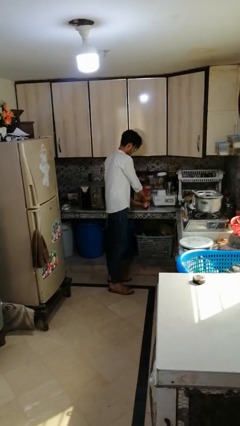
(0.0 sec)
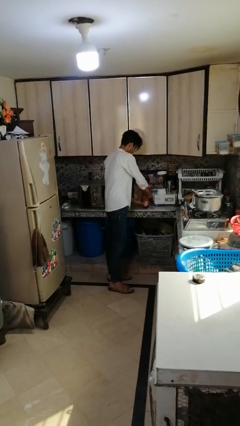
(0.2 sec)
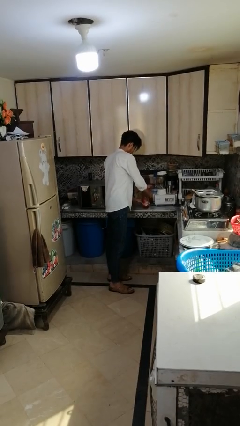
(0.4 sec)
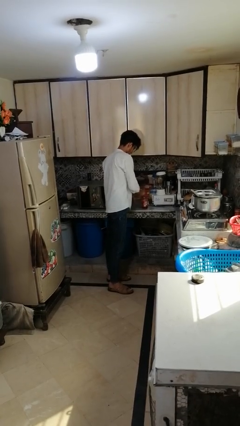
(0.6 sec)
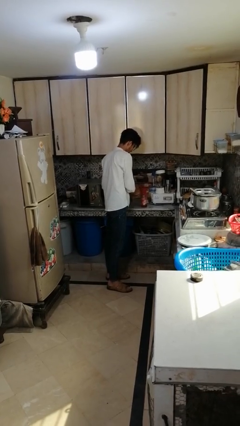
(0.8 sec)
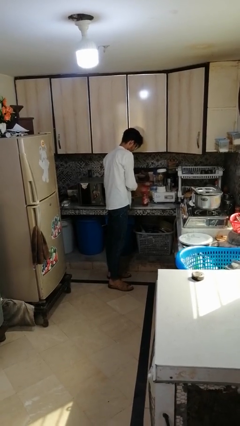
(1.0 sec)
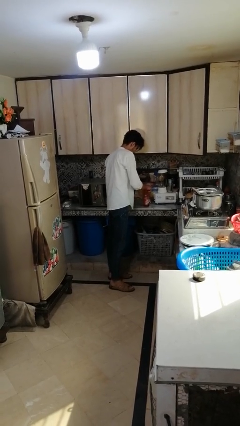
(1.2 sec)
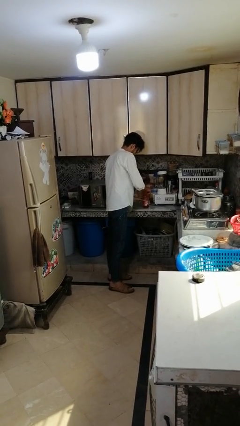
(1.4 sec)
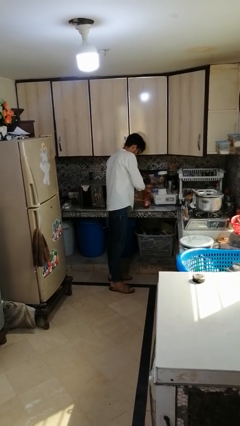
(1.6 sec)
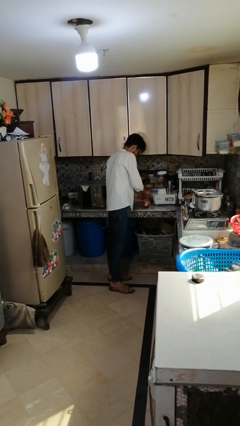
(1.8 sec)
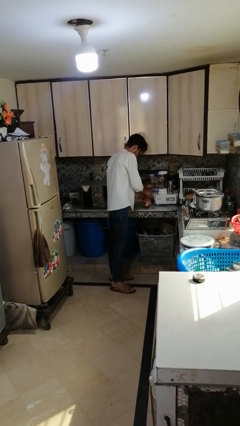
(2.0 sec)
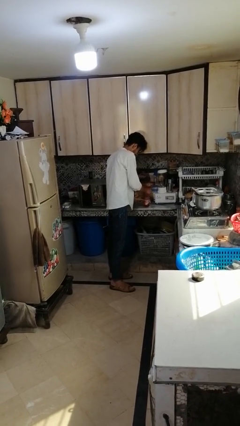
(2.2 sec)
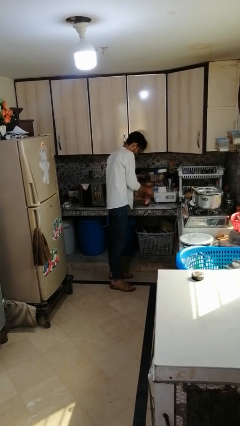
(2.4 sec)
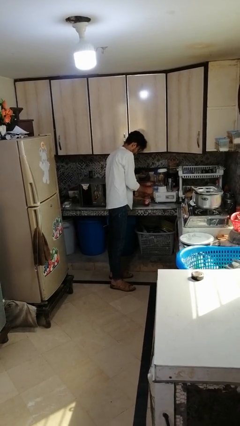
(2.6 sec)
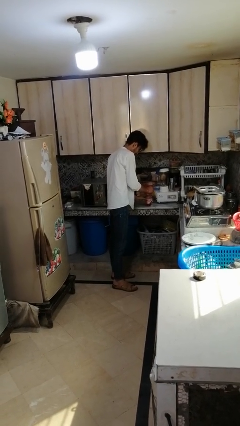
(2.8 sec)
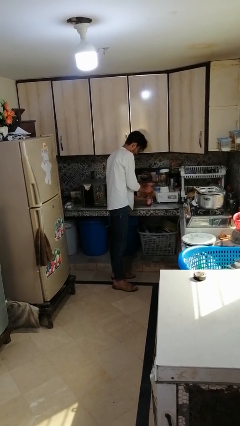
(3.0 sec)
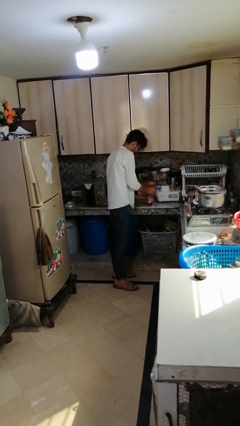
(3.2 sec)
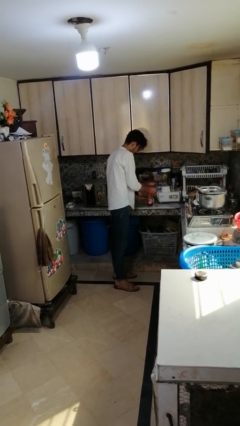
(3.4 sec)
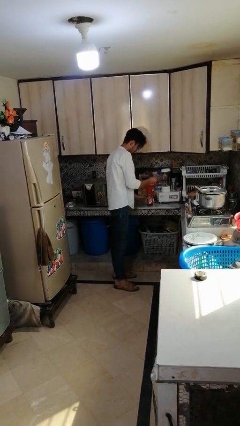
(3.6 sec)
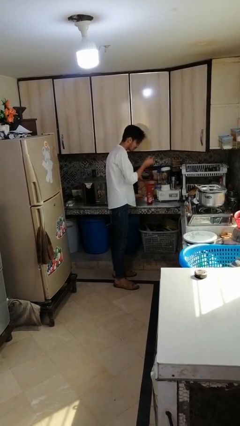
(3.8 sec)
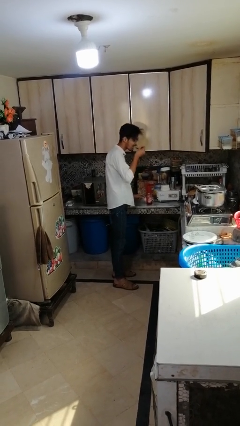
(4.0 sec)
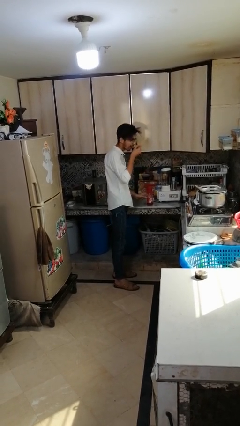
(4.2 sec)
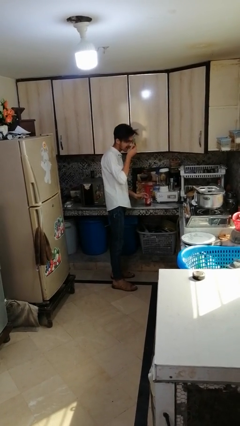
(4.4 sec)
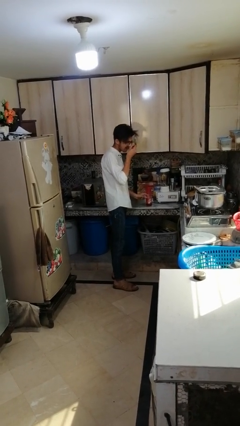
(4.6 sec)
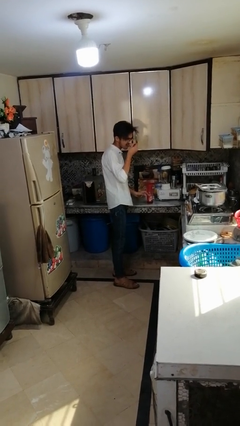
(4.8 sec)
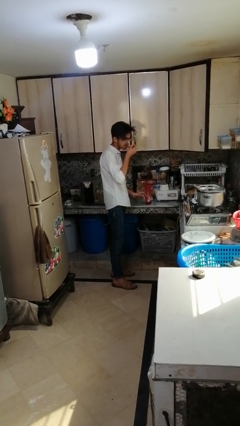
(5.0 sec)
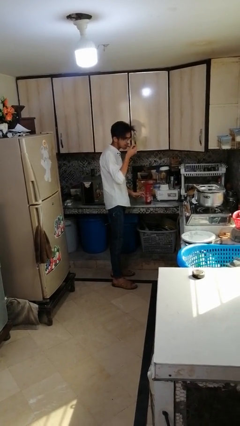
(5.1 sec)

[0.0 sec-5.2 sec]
person eats with utensil

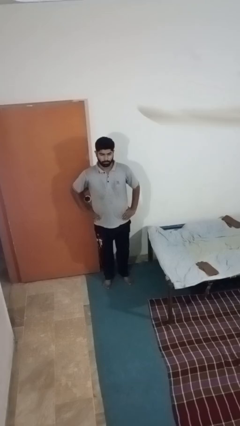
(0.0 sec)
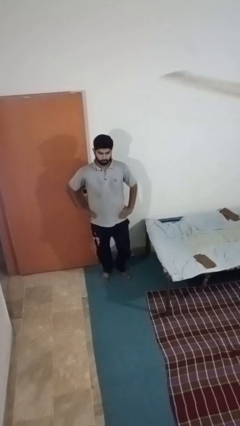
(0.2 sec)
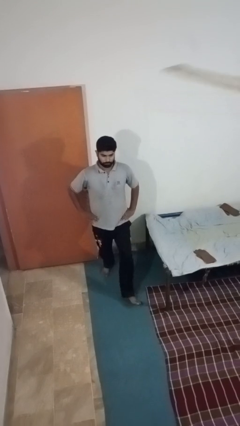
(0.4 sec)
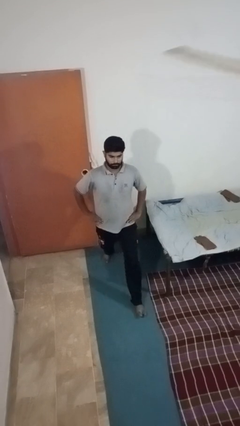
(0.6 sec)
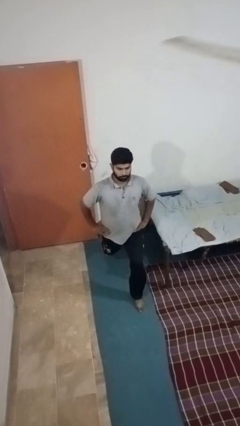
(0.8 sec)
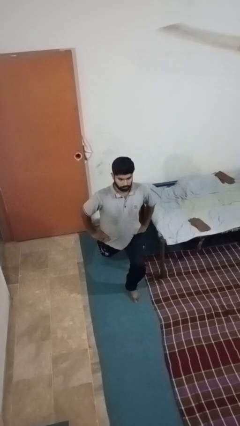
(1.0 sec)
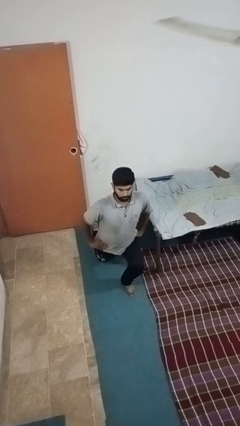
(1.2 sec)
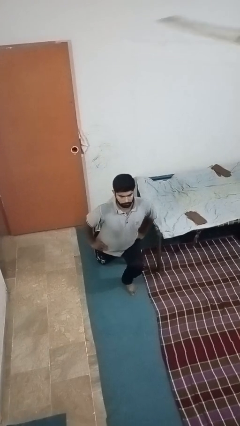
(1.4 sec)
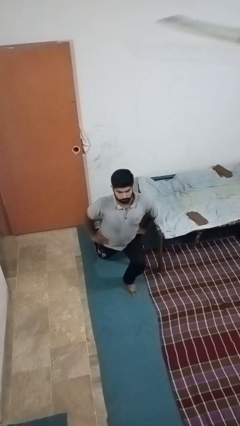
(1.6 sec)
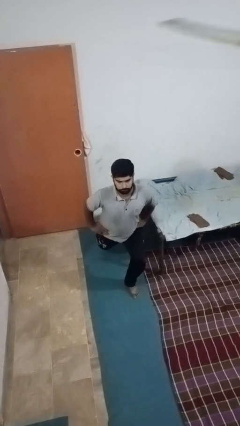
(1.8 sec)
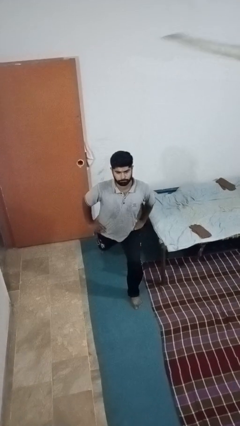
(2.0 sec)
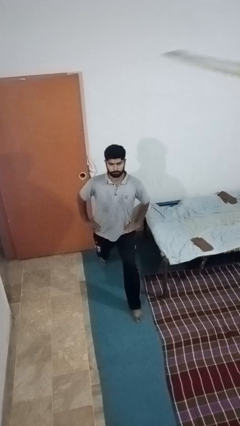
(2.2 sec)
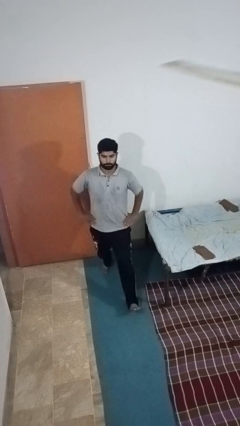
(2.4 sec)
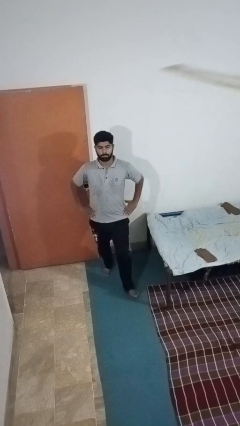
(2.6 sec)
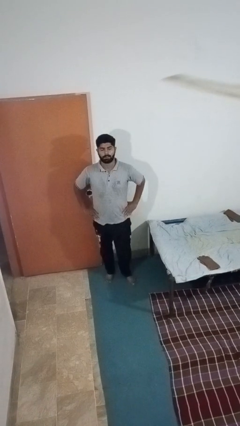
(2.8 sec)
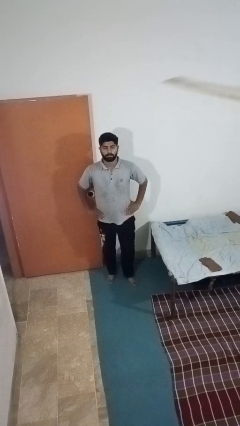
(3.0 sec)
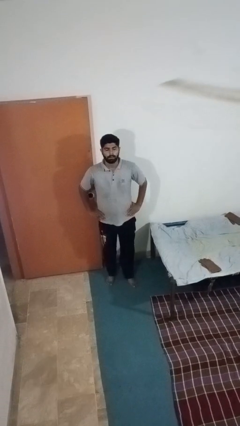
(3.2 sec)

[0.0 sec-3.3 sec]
person exercises with lunges

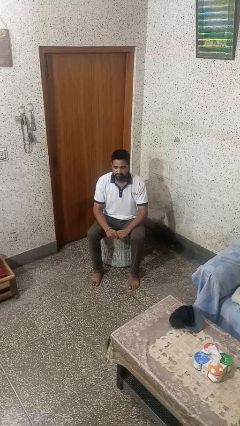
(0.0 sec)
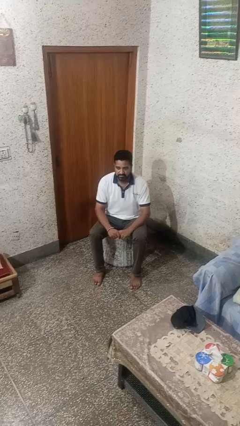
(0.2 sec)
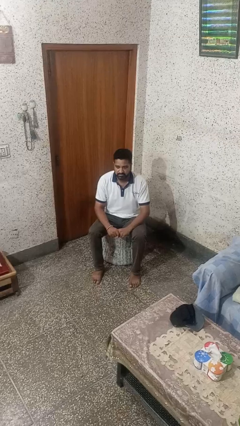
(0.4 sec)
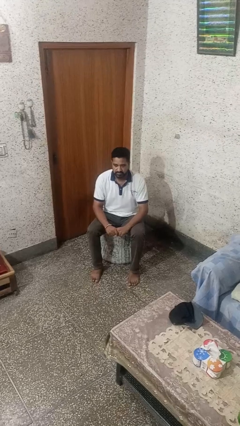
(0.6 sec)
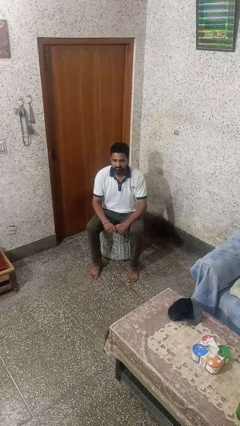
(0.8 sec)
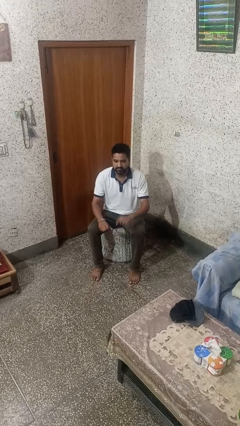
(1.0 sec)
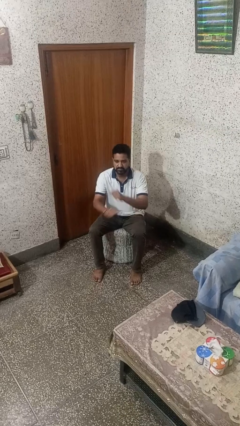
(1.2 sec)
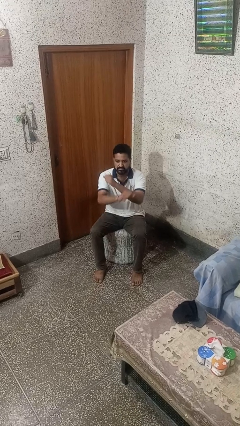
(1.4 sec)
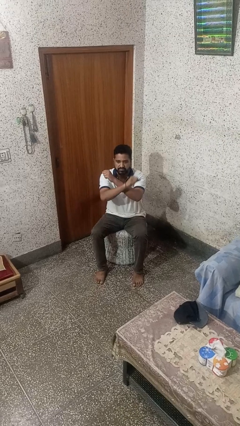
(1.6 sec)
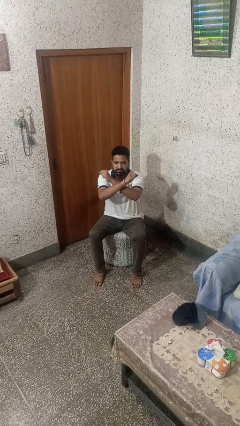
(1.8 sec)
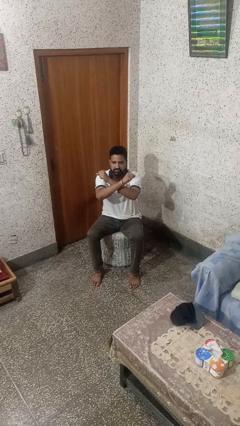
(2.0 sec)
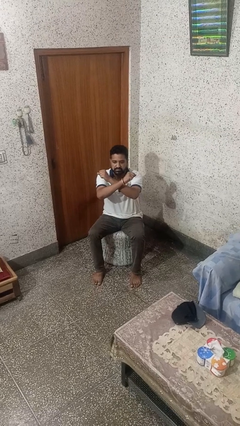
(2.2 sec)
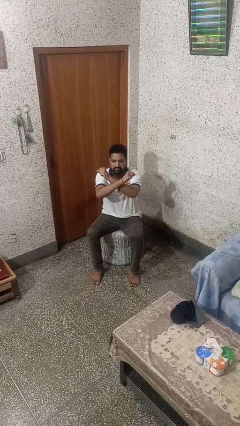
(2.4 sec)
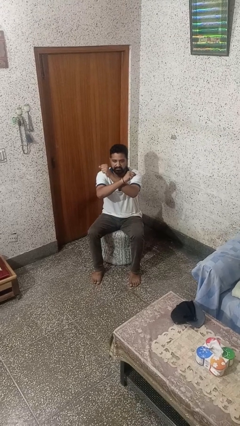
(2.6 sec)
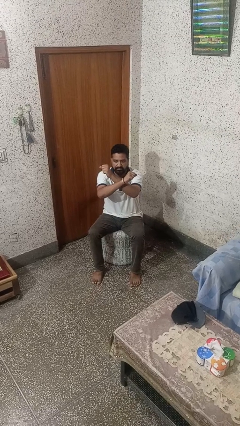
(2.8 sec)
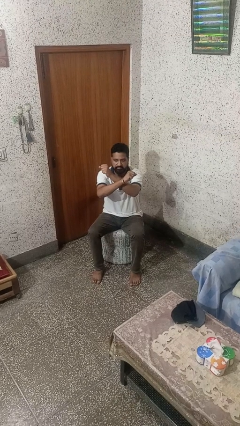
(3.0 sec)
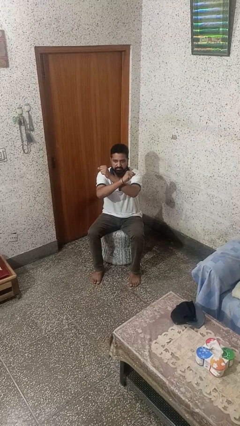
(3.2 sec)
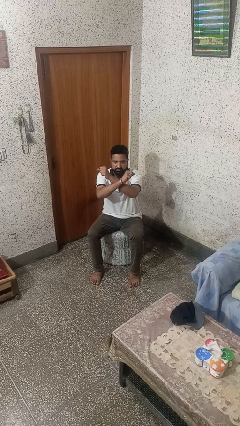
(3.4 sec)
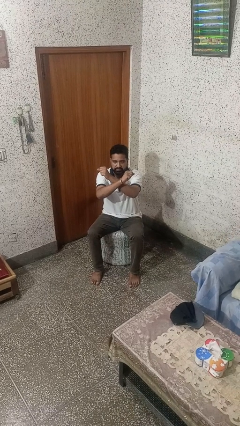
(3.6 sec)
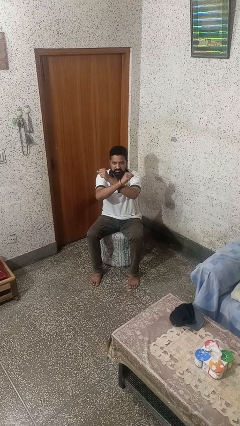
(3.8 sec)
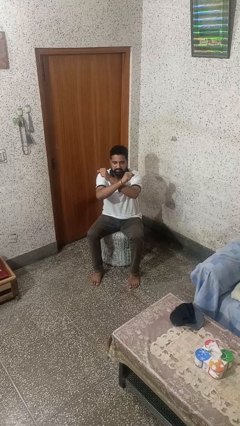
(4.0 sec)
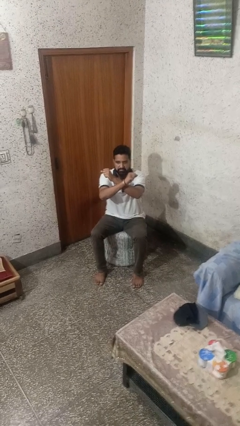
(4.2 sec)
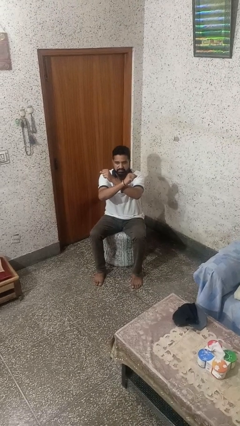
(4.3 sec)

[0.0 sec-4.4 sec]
person gestures arms x

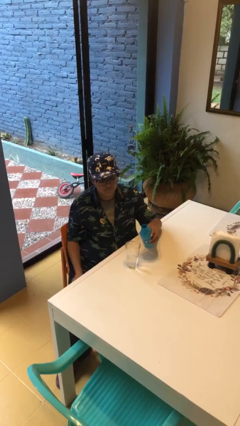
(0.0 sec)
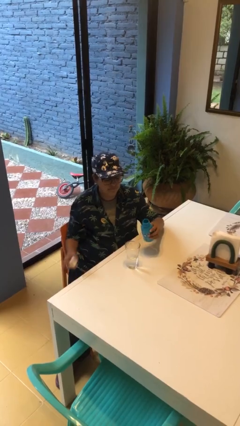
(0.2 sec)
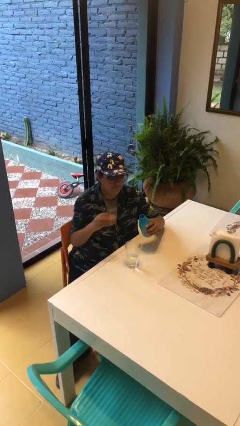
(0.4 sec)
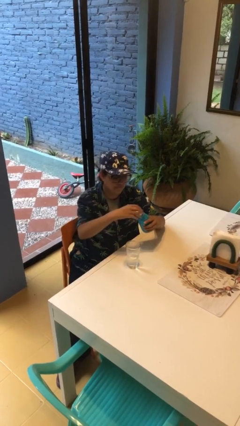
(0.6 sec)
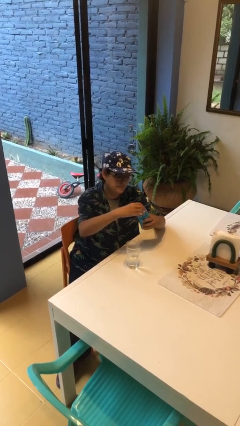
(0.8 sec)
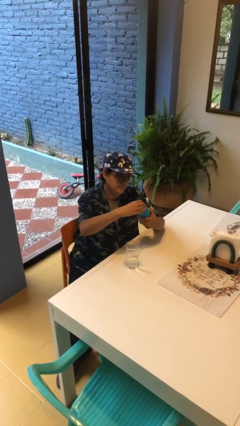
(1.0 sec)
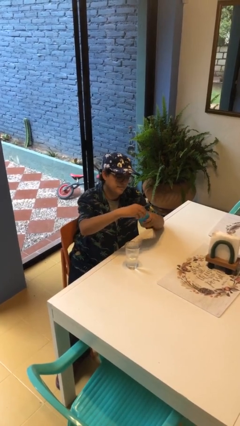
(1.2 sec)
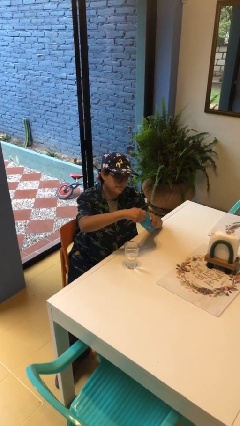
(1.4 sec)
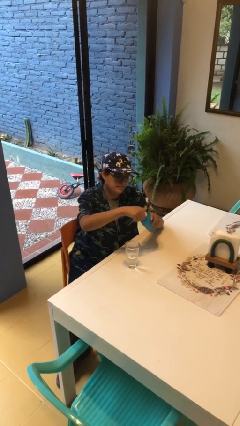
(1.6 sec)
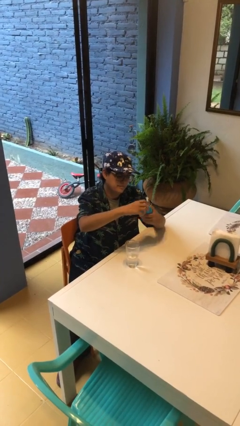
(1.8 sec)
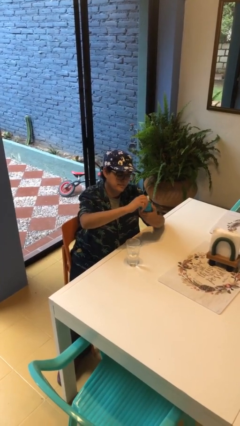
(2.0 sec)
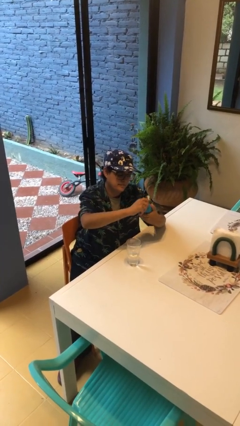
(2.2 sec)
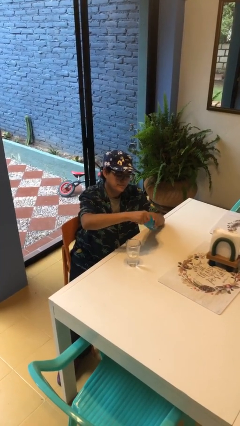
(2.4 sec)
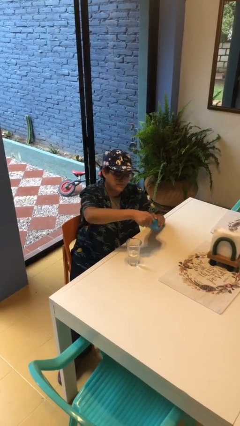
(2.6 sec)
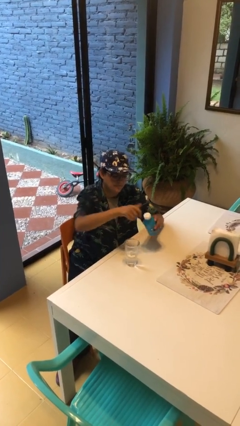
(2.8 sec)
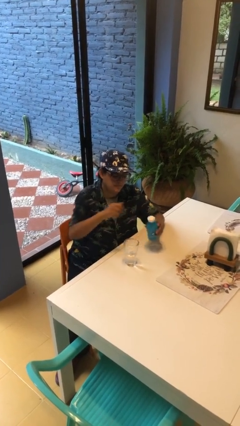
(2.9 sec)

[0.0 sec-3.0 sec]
person screws lid to bottle

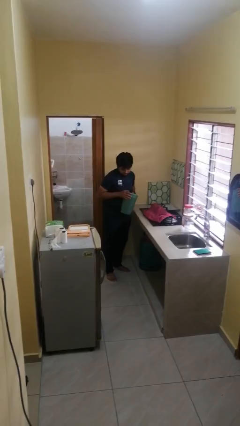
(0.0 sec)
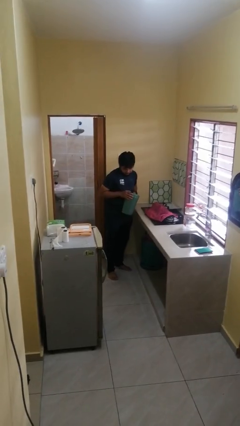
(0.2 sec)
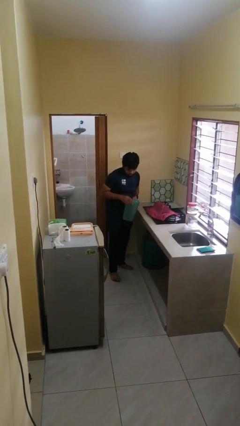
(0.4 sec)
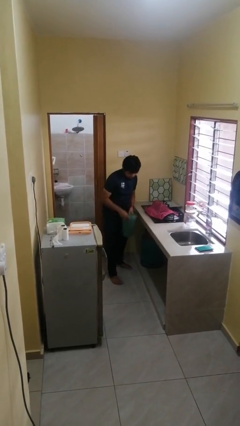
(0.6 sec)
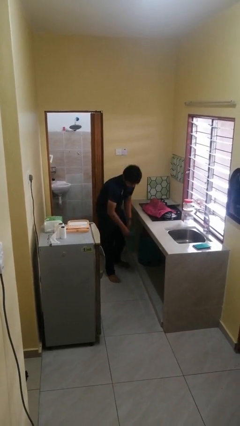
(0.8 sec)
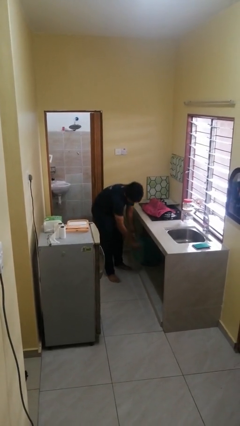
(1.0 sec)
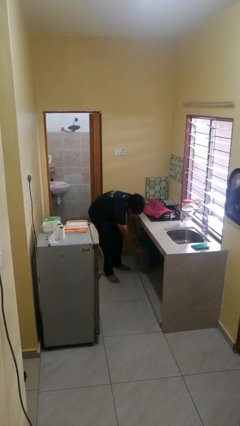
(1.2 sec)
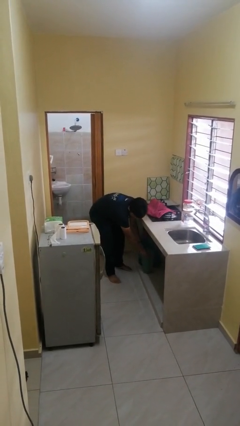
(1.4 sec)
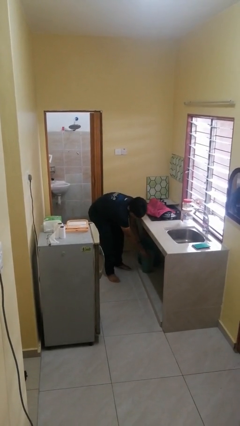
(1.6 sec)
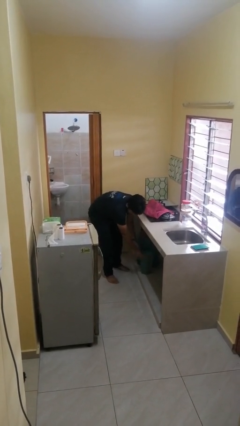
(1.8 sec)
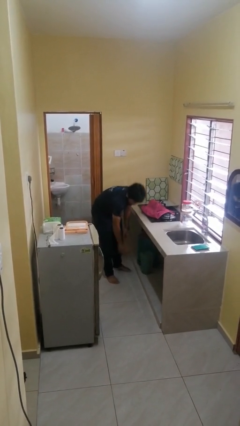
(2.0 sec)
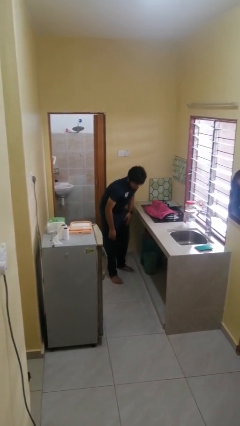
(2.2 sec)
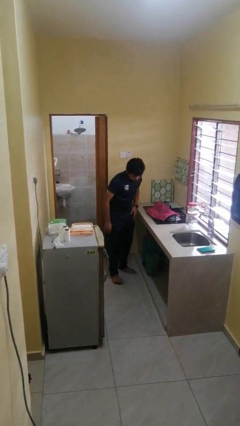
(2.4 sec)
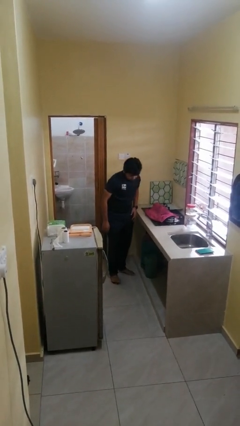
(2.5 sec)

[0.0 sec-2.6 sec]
person puts down object into cabinet
